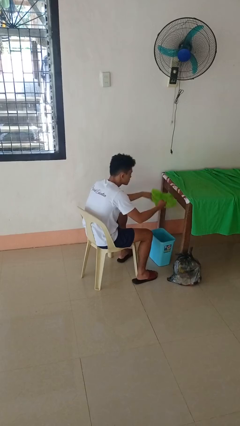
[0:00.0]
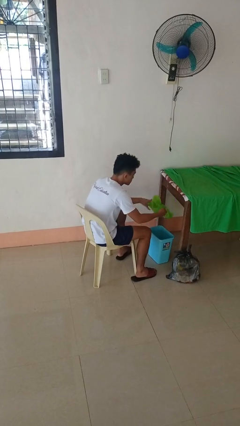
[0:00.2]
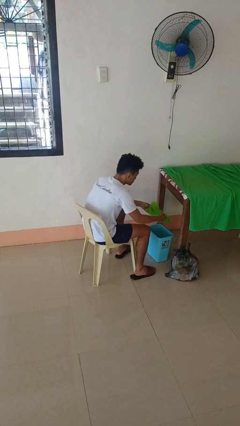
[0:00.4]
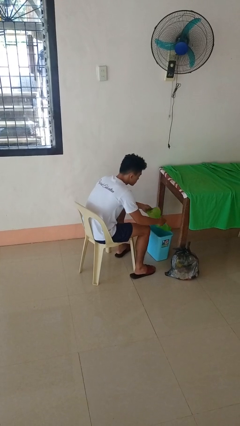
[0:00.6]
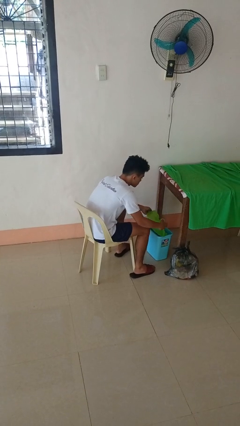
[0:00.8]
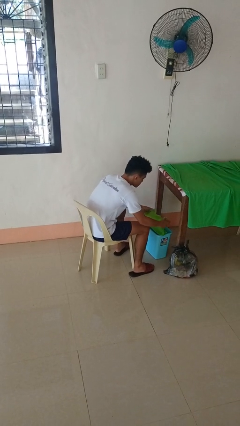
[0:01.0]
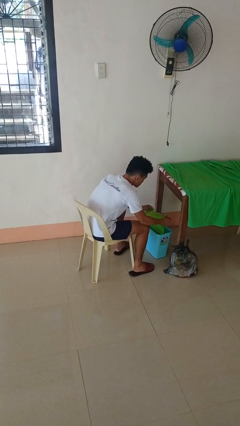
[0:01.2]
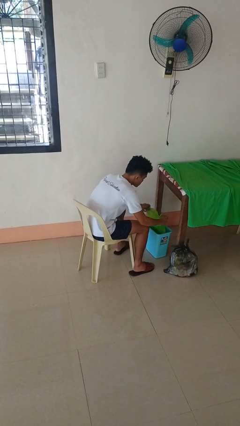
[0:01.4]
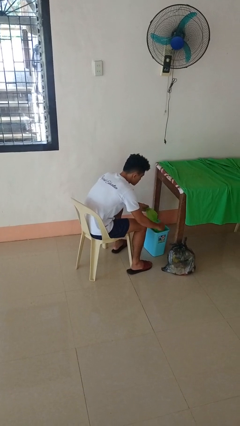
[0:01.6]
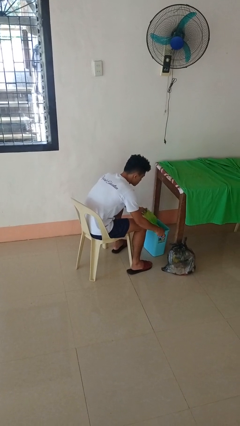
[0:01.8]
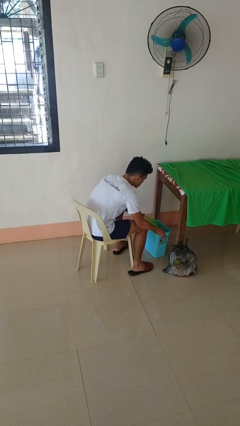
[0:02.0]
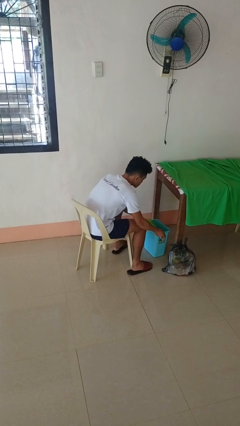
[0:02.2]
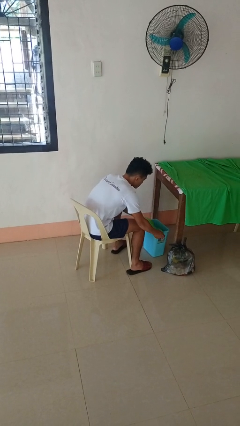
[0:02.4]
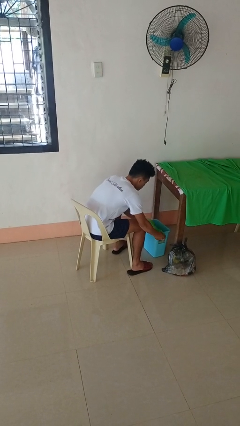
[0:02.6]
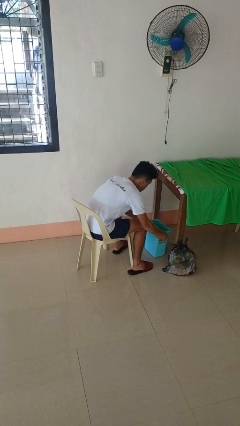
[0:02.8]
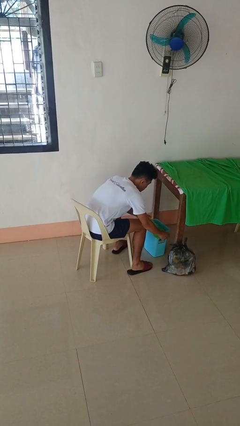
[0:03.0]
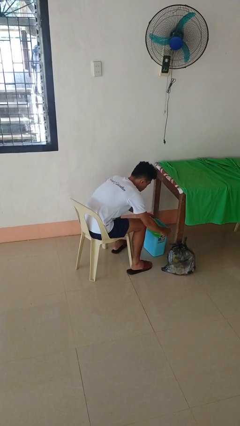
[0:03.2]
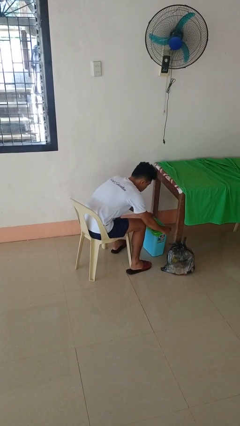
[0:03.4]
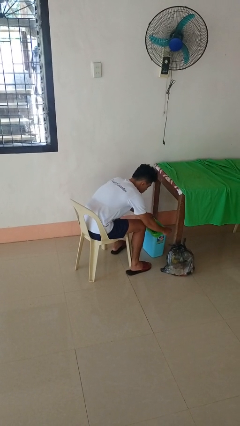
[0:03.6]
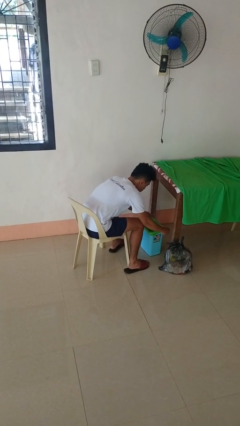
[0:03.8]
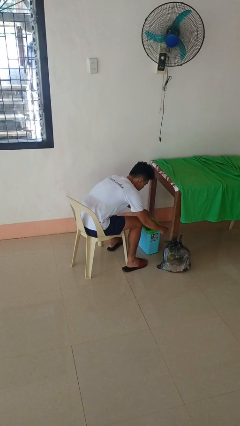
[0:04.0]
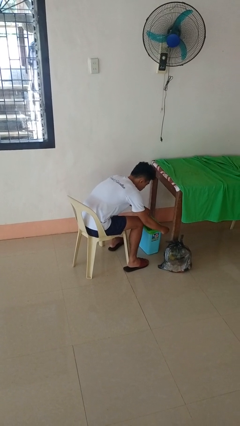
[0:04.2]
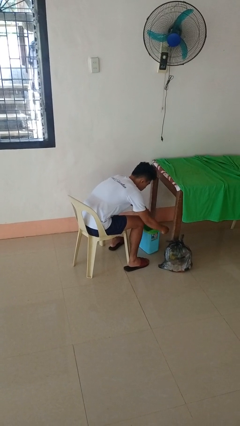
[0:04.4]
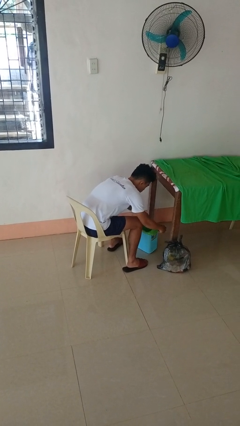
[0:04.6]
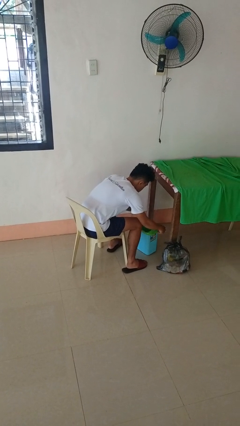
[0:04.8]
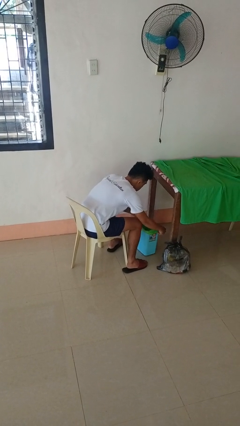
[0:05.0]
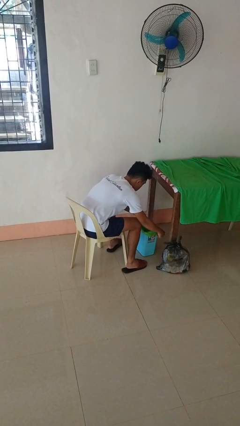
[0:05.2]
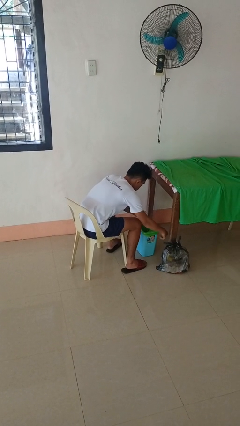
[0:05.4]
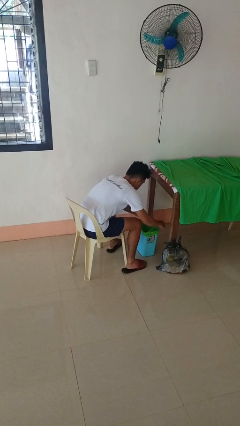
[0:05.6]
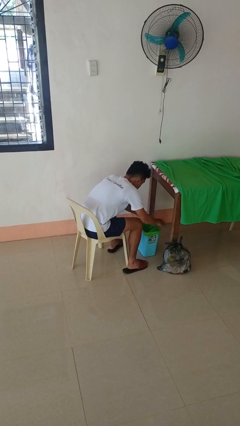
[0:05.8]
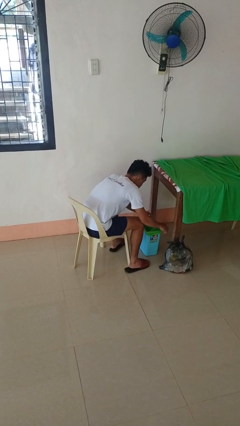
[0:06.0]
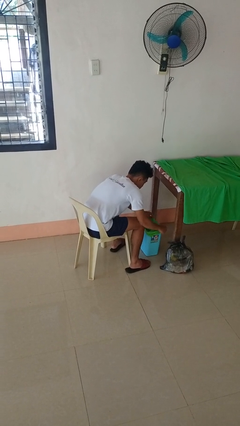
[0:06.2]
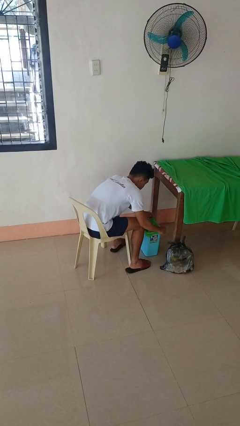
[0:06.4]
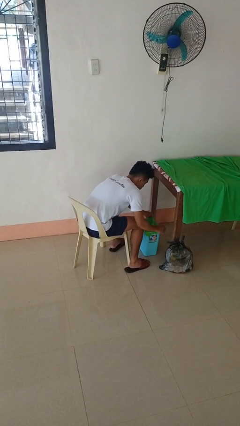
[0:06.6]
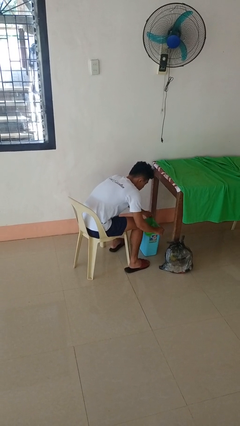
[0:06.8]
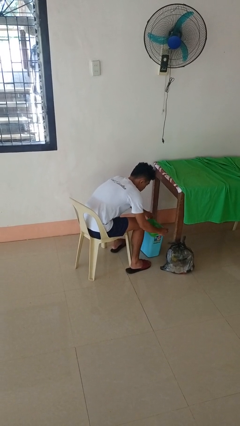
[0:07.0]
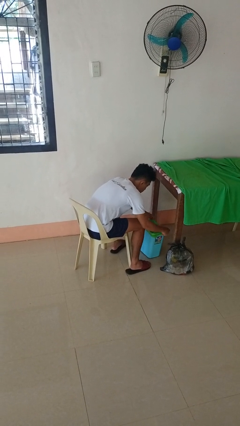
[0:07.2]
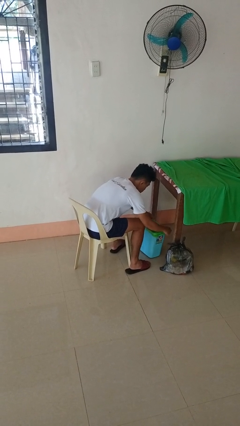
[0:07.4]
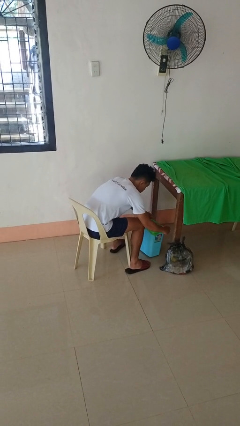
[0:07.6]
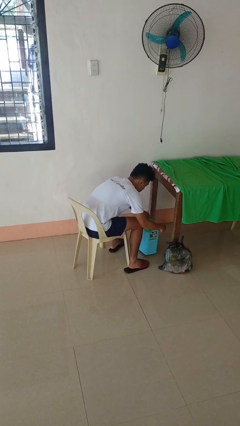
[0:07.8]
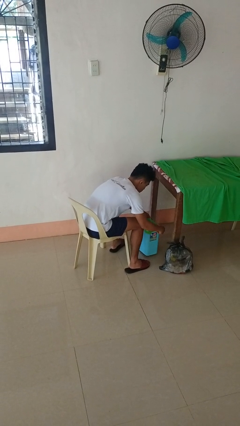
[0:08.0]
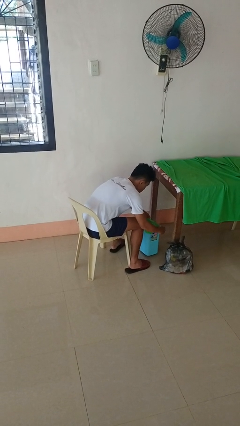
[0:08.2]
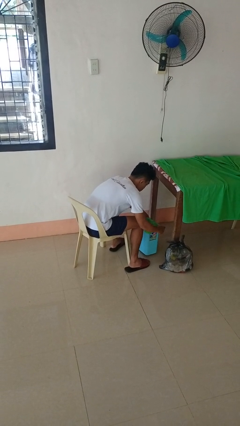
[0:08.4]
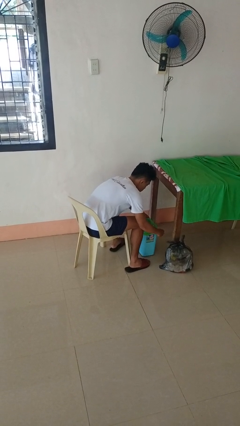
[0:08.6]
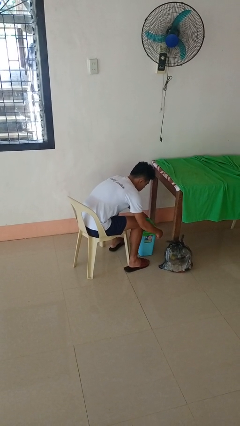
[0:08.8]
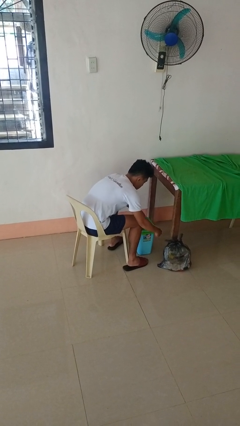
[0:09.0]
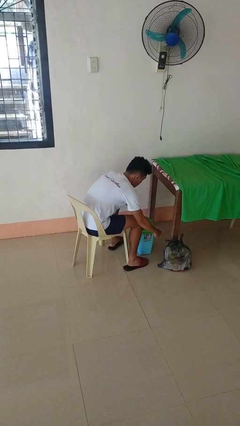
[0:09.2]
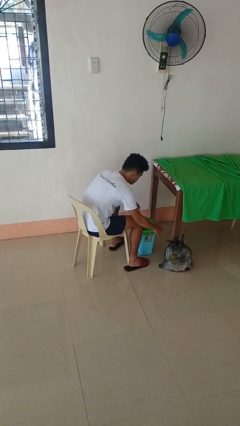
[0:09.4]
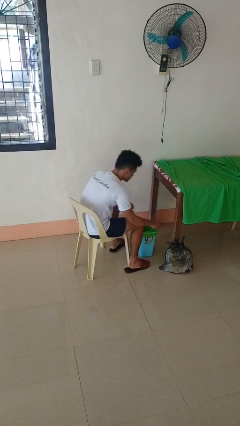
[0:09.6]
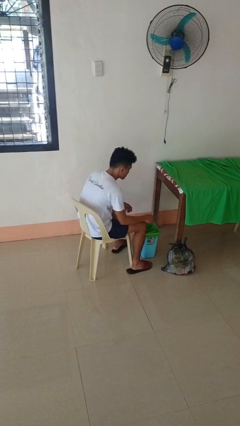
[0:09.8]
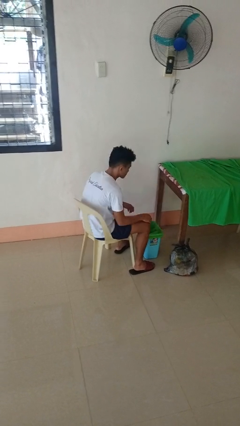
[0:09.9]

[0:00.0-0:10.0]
person inserts trashbag into trashcan

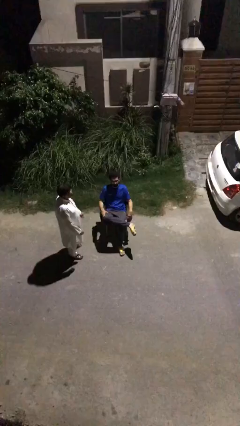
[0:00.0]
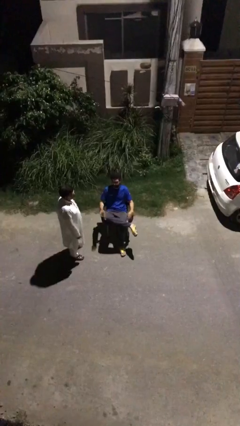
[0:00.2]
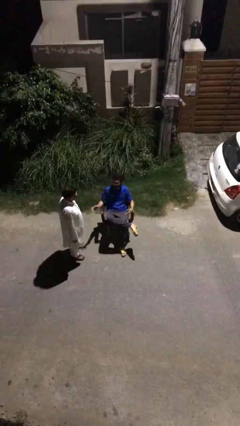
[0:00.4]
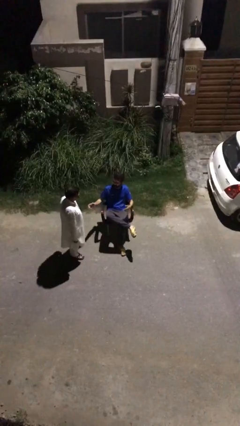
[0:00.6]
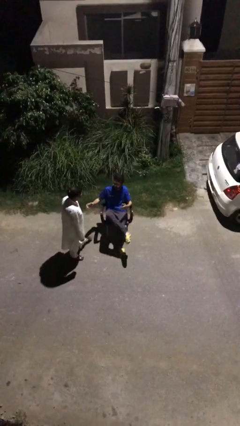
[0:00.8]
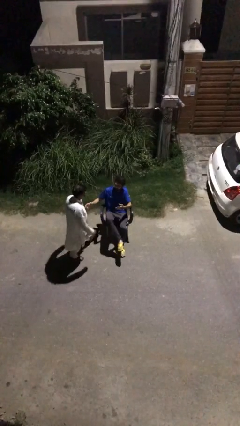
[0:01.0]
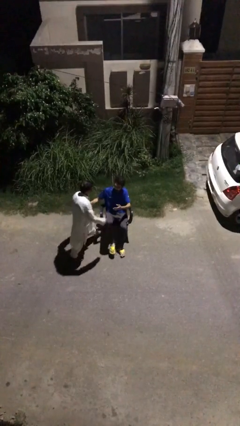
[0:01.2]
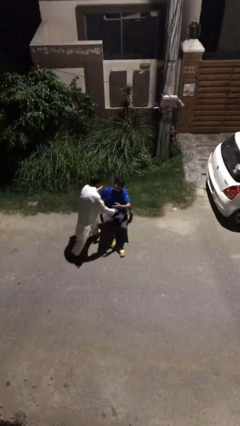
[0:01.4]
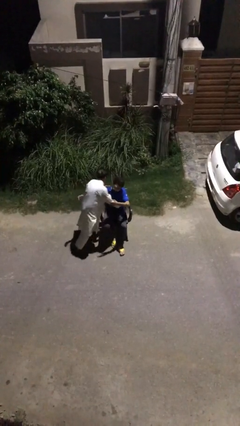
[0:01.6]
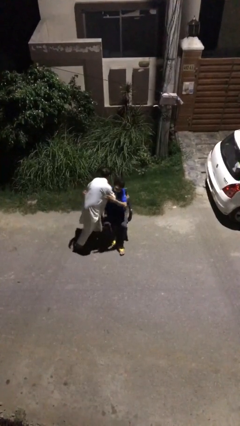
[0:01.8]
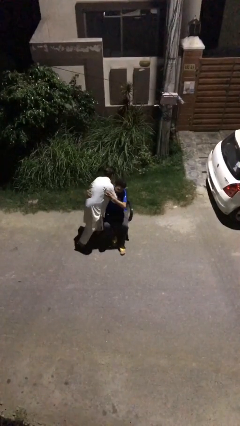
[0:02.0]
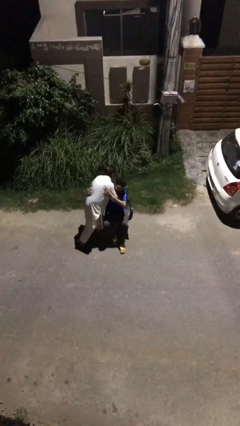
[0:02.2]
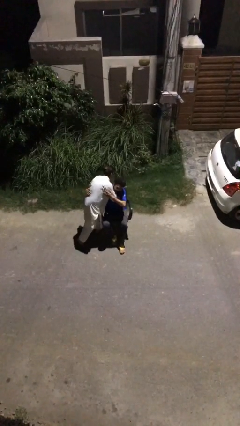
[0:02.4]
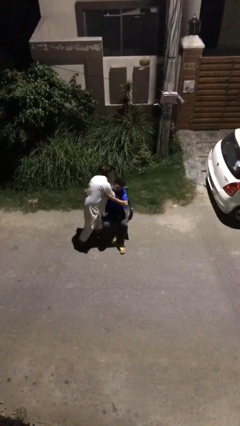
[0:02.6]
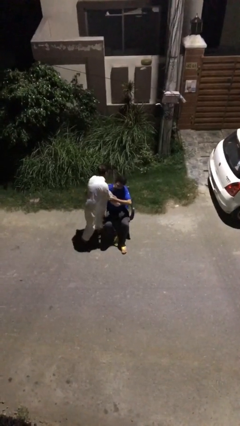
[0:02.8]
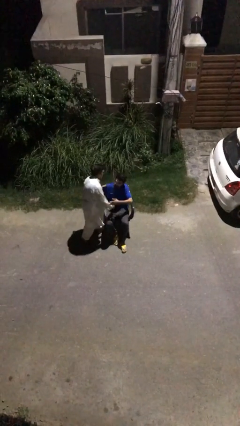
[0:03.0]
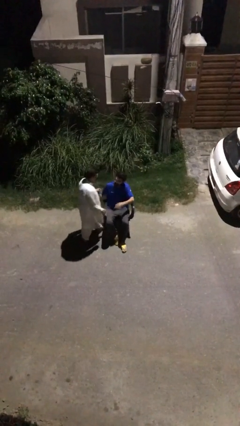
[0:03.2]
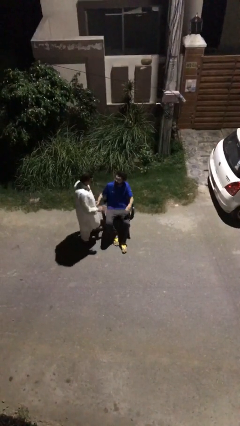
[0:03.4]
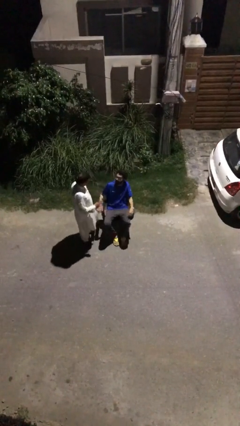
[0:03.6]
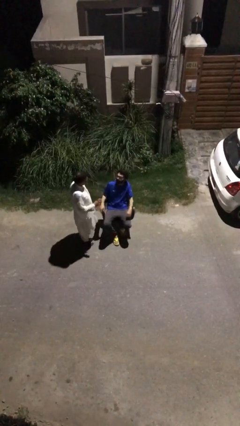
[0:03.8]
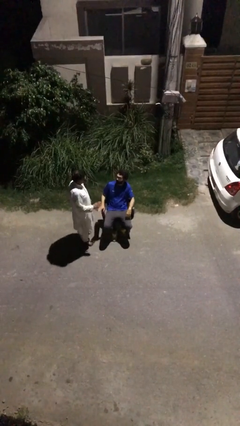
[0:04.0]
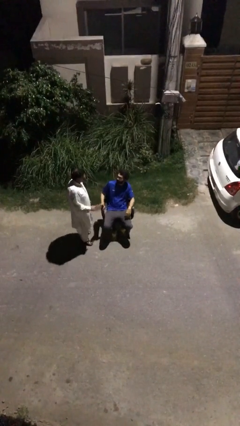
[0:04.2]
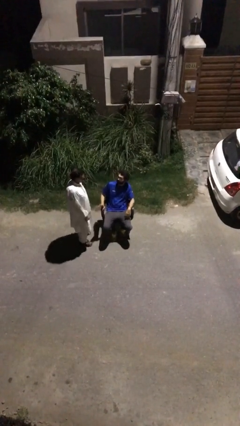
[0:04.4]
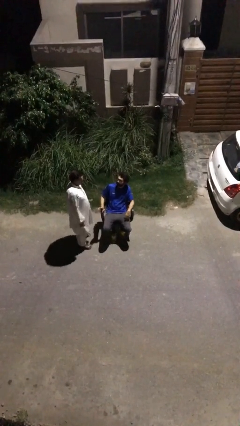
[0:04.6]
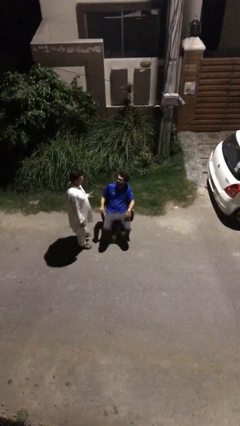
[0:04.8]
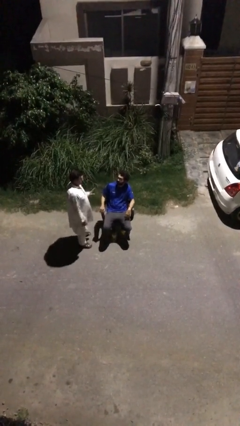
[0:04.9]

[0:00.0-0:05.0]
person embraces person

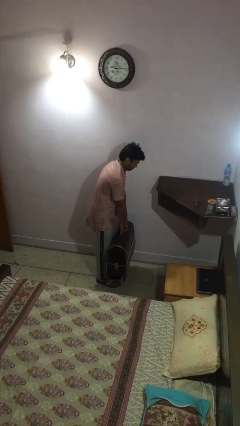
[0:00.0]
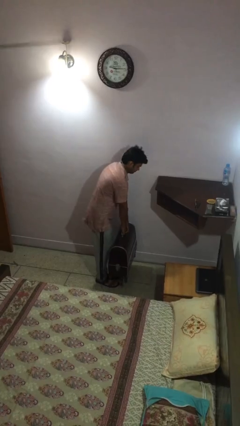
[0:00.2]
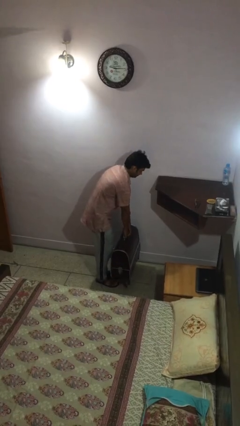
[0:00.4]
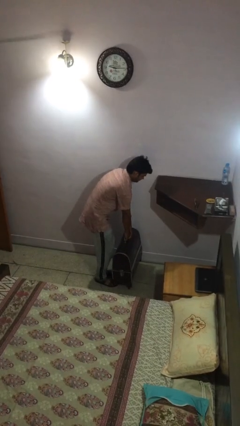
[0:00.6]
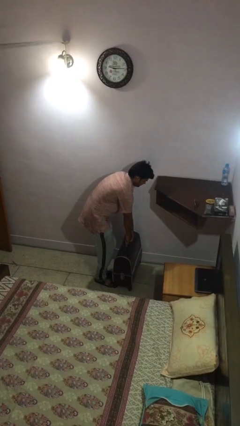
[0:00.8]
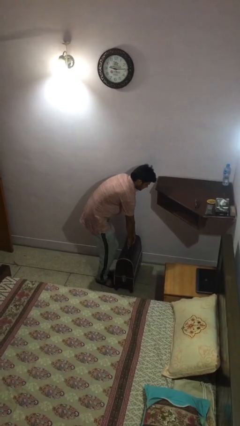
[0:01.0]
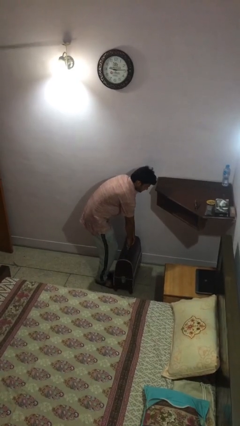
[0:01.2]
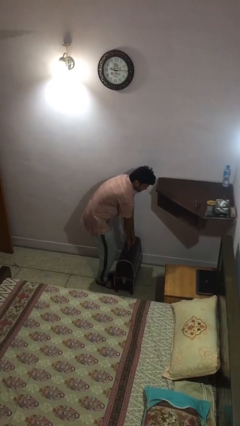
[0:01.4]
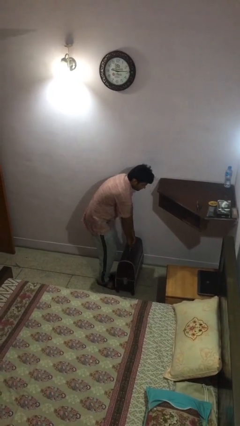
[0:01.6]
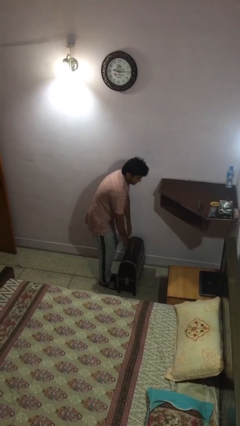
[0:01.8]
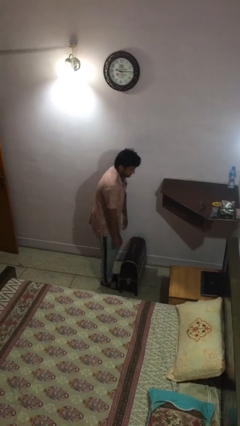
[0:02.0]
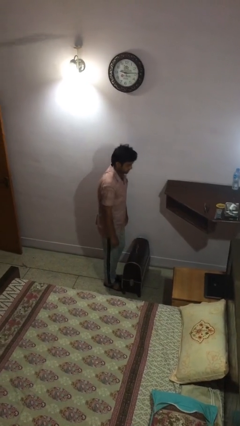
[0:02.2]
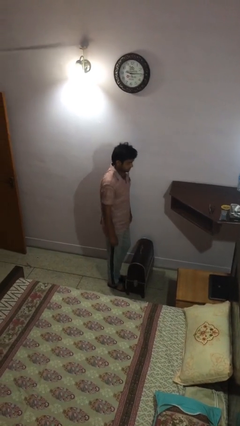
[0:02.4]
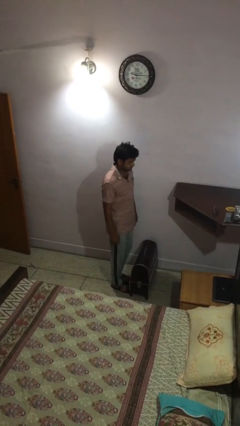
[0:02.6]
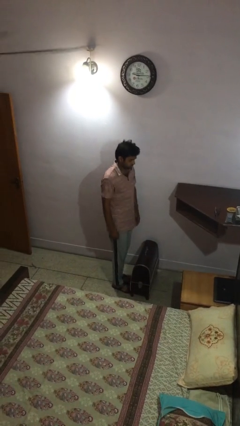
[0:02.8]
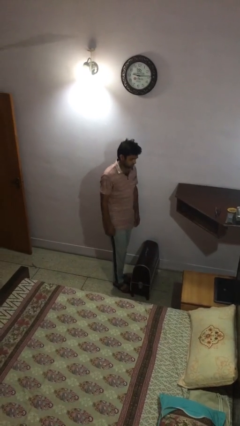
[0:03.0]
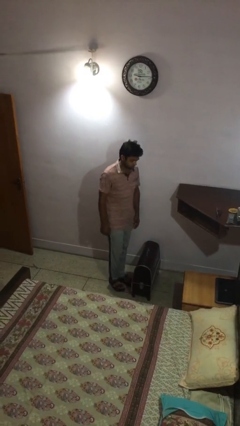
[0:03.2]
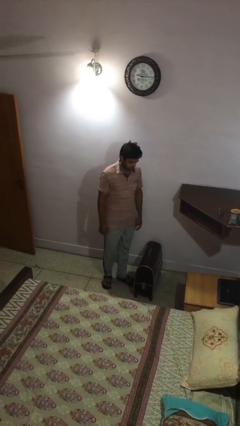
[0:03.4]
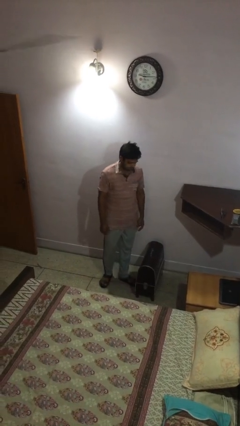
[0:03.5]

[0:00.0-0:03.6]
person puts down object on floor
